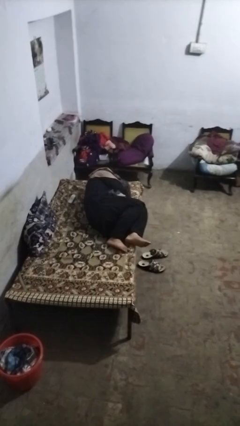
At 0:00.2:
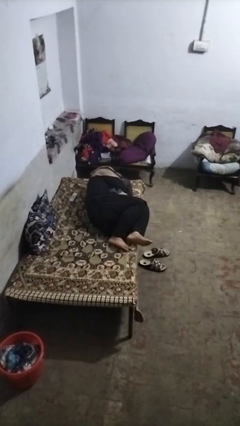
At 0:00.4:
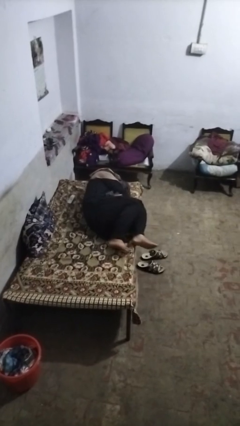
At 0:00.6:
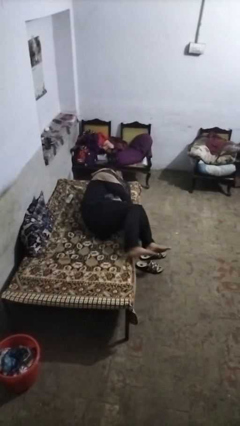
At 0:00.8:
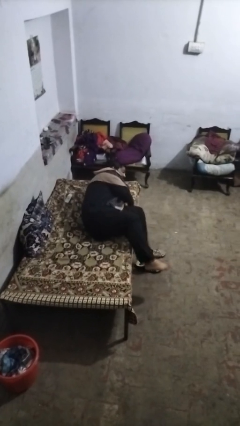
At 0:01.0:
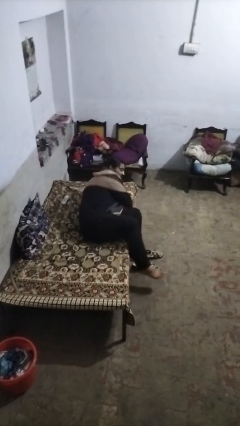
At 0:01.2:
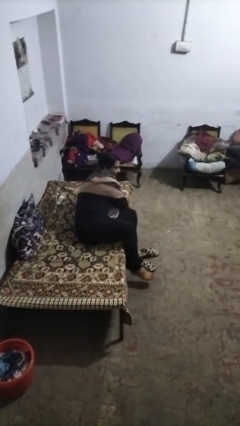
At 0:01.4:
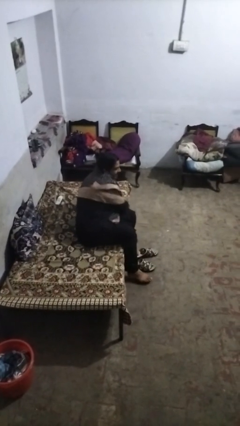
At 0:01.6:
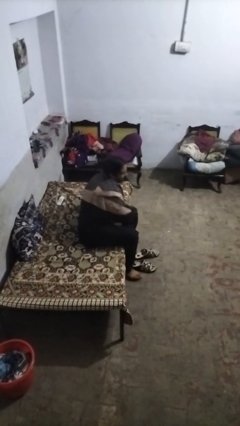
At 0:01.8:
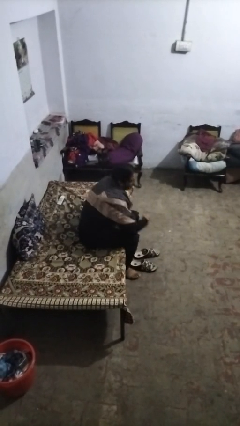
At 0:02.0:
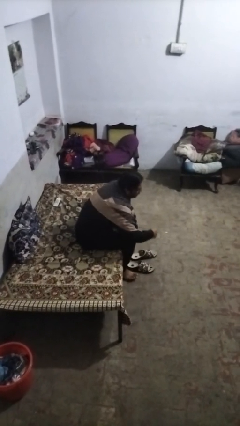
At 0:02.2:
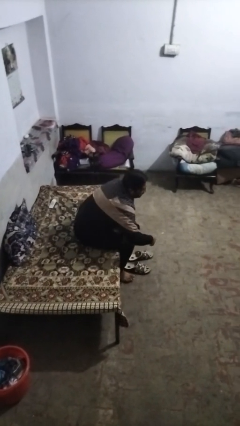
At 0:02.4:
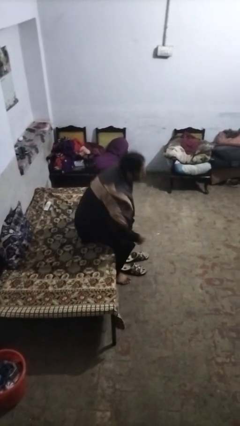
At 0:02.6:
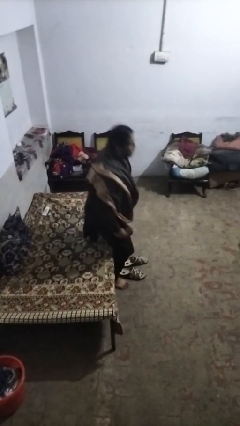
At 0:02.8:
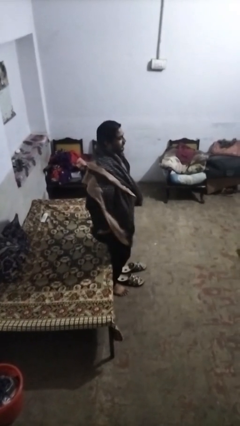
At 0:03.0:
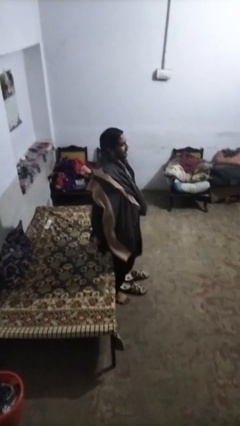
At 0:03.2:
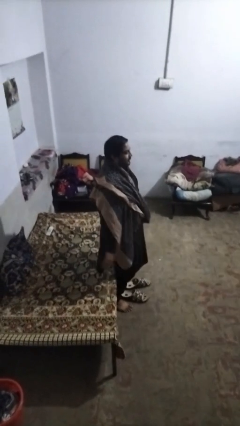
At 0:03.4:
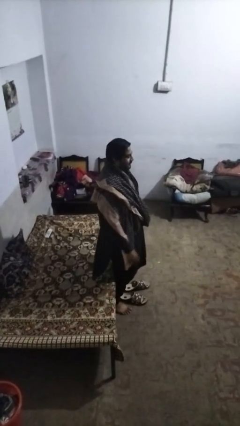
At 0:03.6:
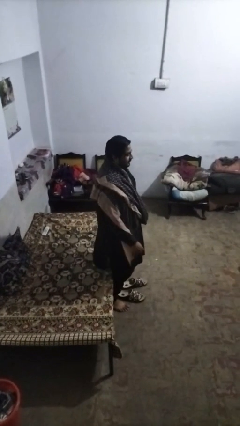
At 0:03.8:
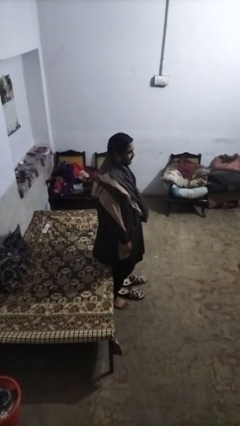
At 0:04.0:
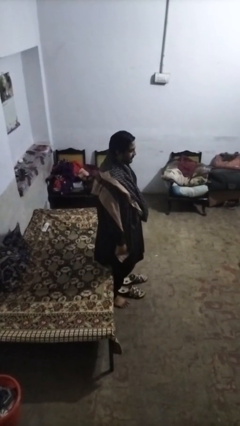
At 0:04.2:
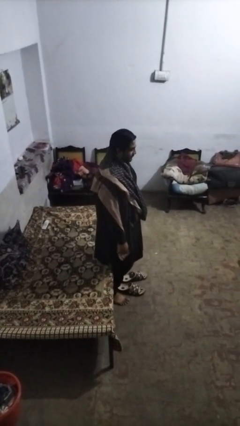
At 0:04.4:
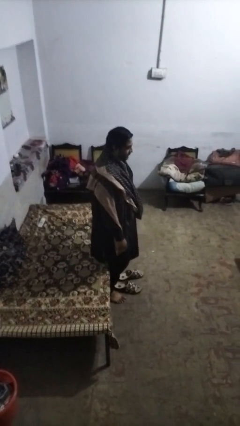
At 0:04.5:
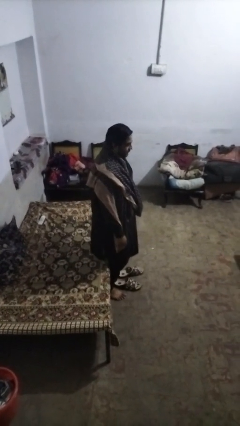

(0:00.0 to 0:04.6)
person stands up

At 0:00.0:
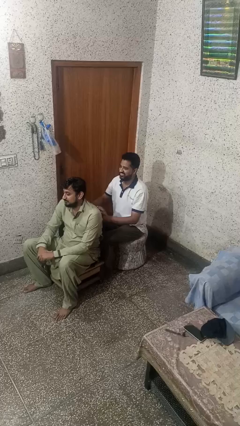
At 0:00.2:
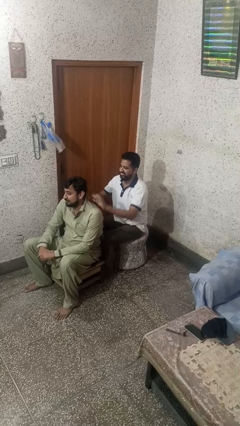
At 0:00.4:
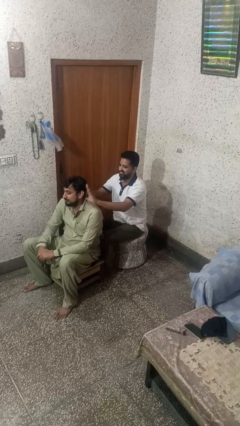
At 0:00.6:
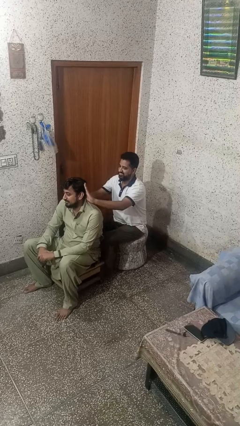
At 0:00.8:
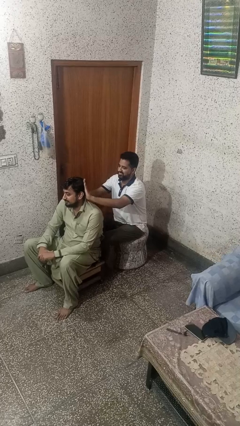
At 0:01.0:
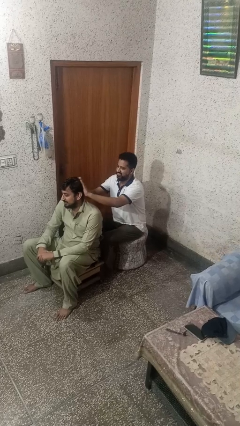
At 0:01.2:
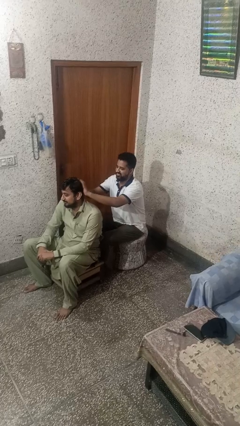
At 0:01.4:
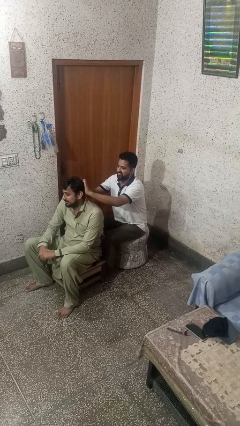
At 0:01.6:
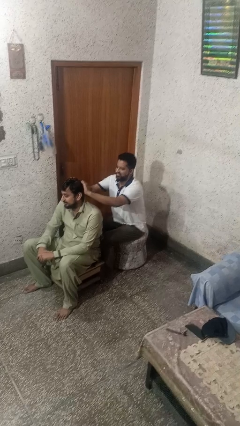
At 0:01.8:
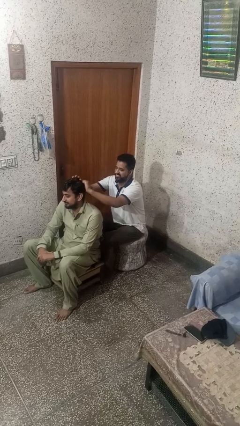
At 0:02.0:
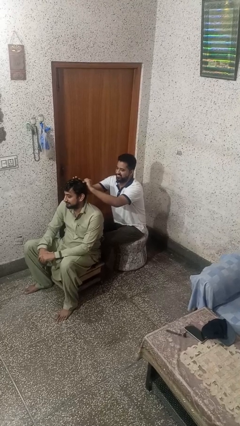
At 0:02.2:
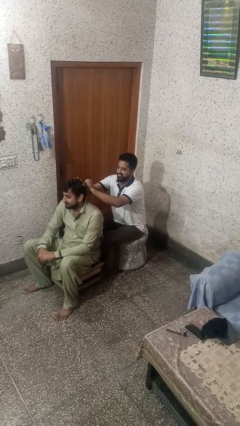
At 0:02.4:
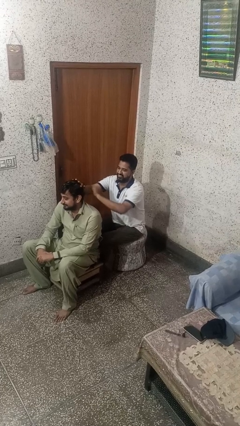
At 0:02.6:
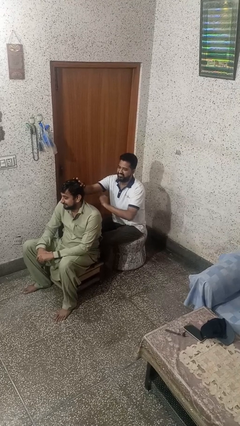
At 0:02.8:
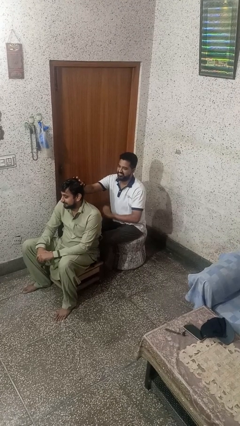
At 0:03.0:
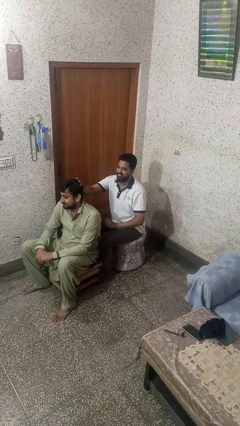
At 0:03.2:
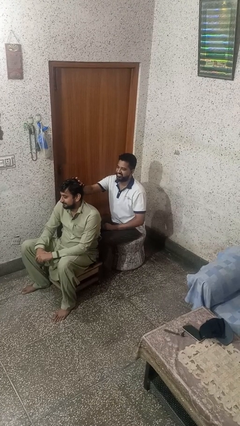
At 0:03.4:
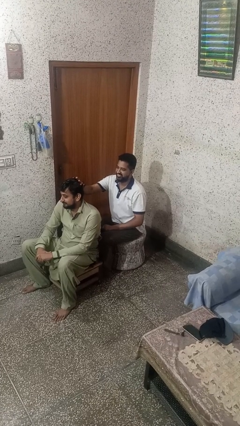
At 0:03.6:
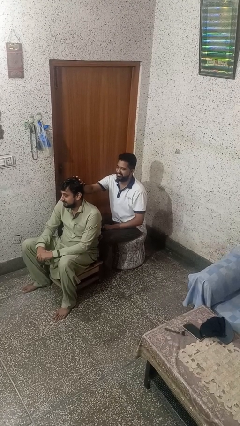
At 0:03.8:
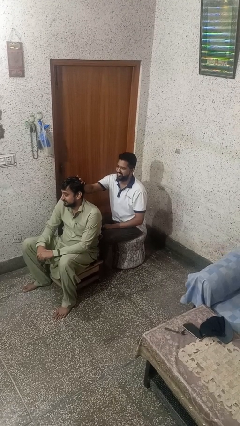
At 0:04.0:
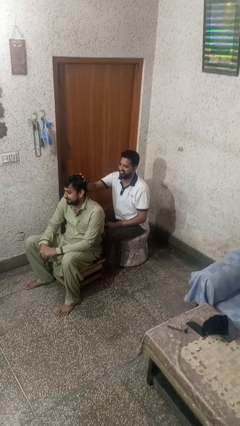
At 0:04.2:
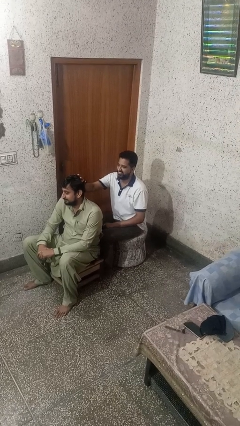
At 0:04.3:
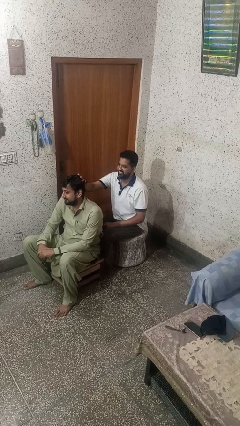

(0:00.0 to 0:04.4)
person braids hair of person

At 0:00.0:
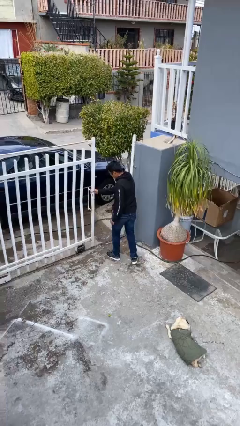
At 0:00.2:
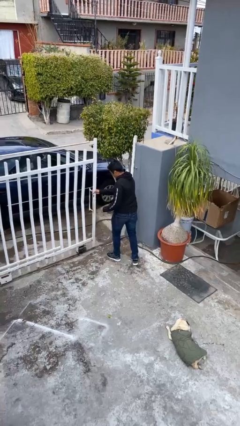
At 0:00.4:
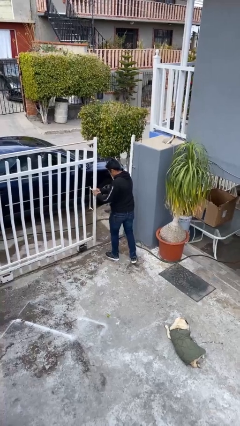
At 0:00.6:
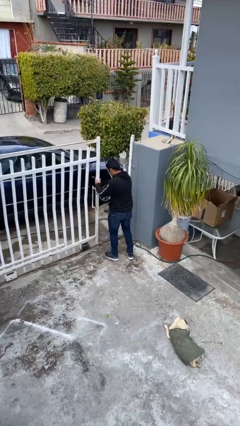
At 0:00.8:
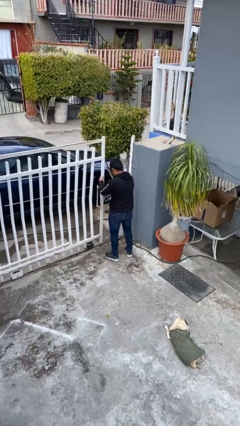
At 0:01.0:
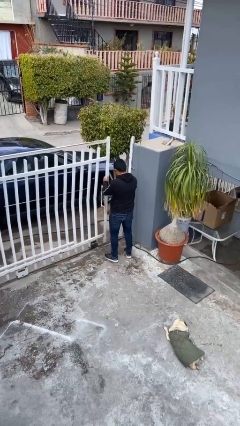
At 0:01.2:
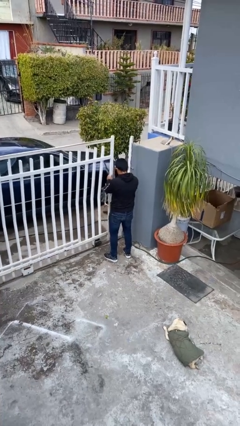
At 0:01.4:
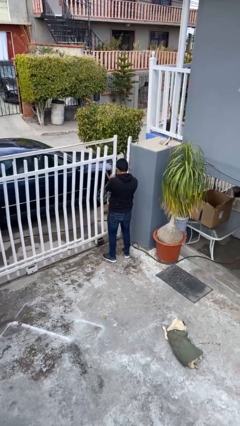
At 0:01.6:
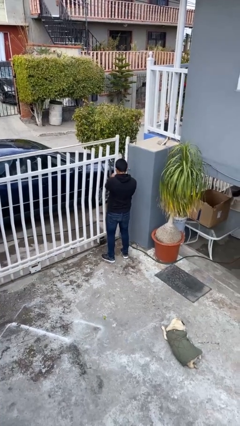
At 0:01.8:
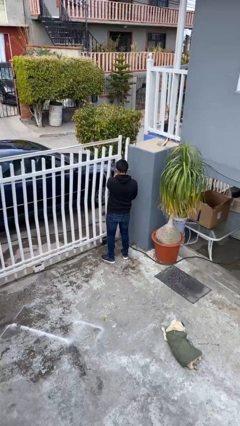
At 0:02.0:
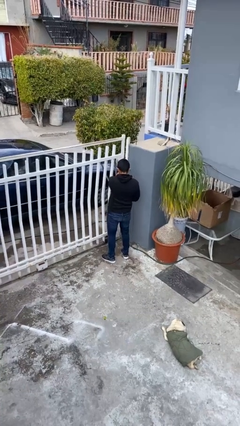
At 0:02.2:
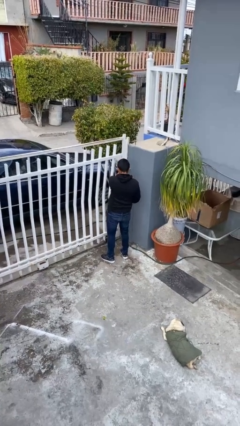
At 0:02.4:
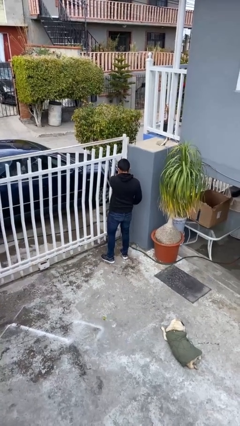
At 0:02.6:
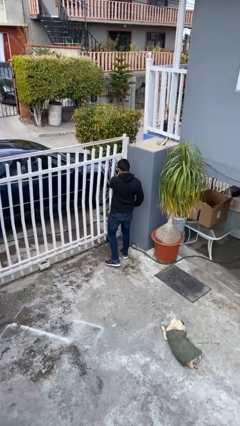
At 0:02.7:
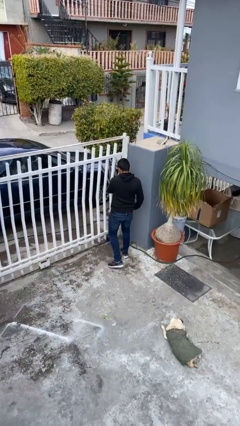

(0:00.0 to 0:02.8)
person closes facility door

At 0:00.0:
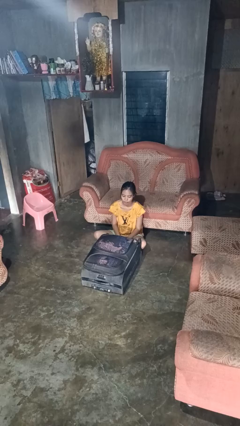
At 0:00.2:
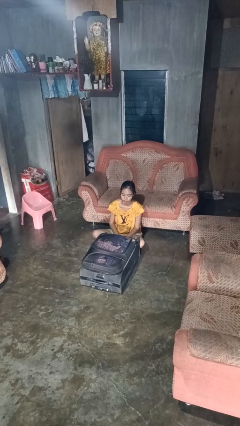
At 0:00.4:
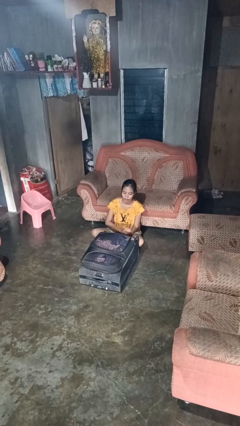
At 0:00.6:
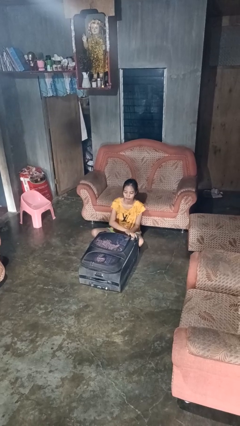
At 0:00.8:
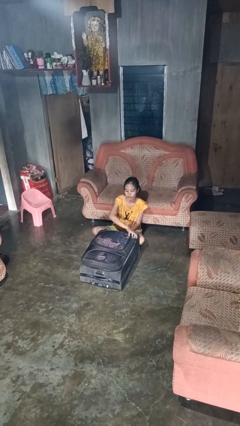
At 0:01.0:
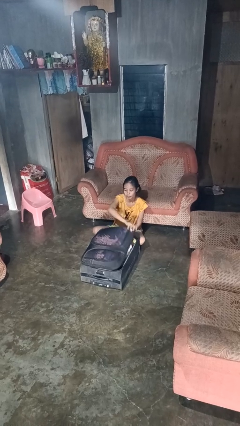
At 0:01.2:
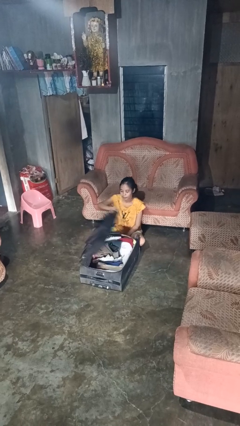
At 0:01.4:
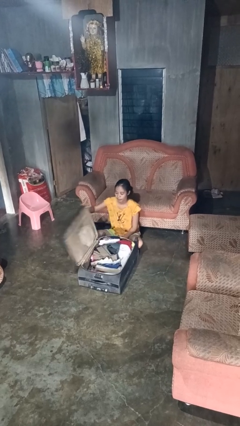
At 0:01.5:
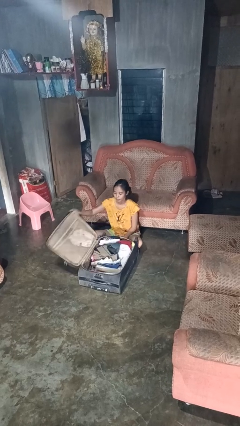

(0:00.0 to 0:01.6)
person opens suitcase

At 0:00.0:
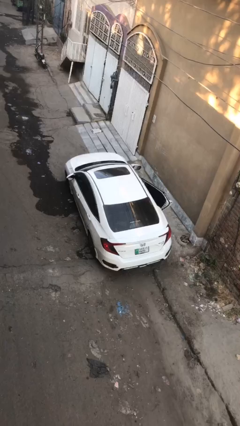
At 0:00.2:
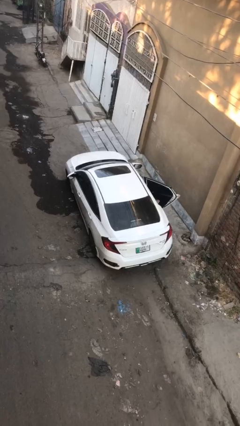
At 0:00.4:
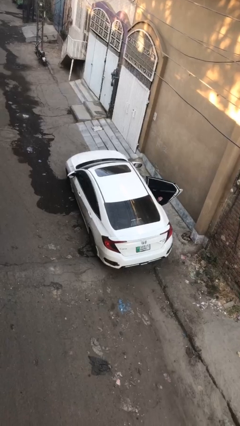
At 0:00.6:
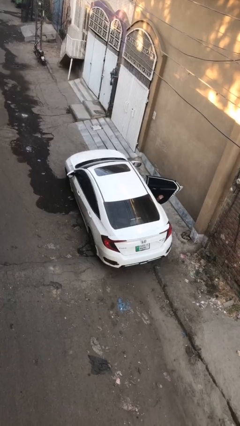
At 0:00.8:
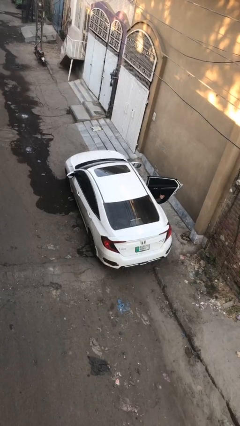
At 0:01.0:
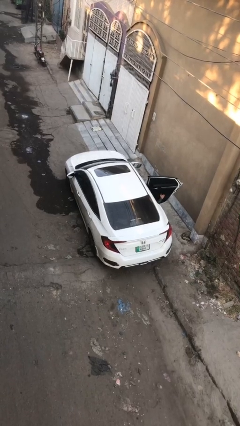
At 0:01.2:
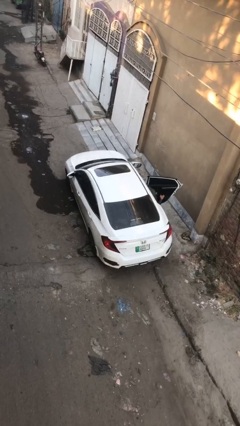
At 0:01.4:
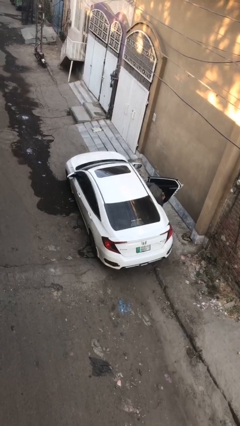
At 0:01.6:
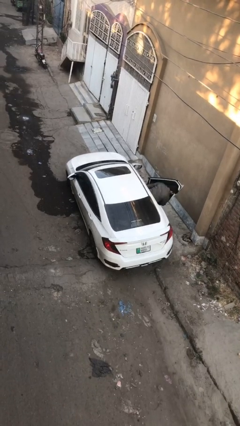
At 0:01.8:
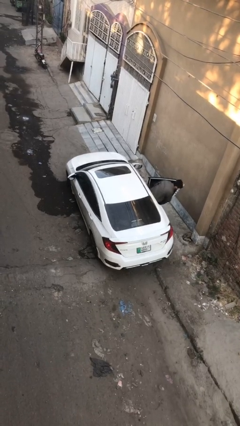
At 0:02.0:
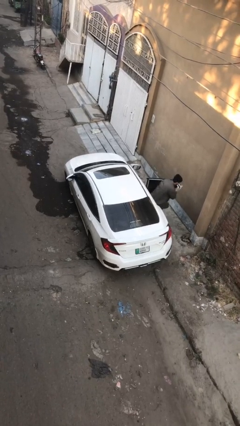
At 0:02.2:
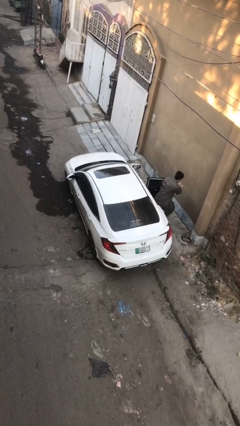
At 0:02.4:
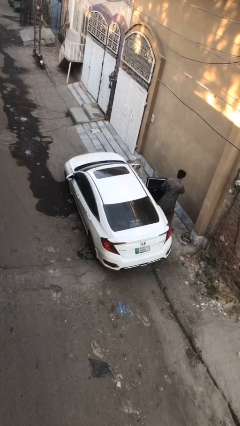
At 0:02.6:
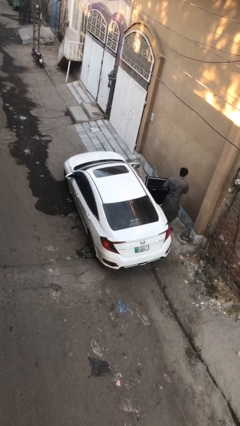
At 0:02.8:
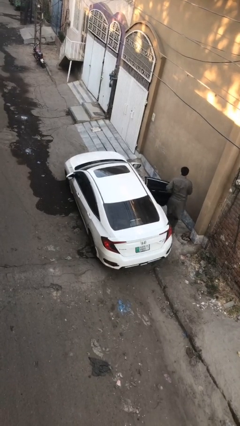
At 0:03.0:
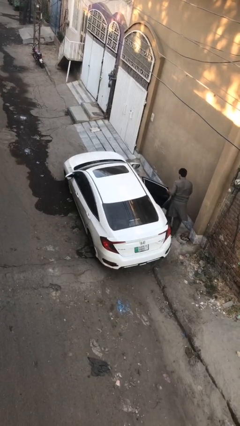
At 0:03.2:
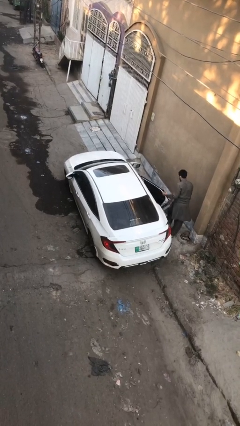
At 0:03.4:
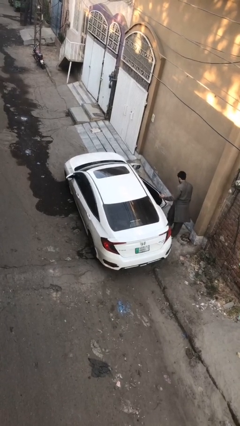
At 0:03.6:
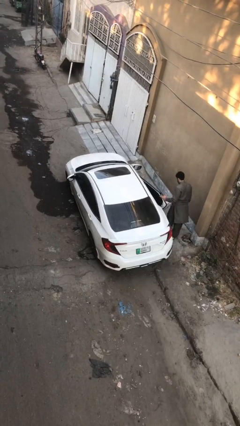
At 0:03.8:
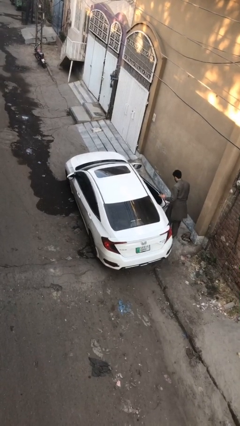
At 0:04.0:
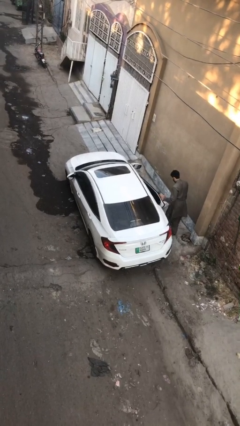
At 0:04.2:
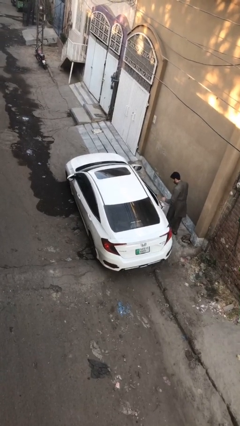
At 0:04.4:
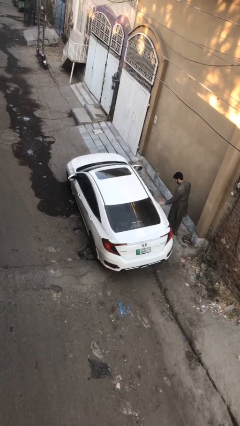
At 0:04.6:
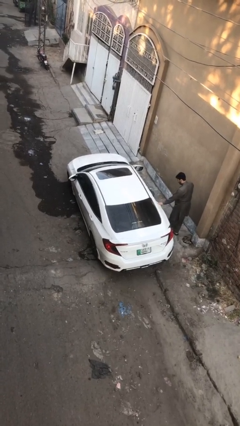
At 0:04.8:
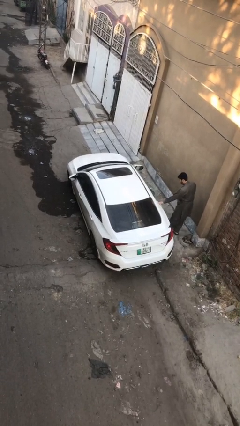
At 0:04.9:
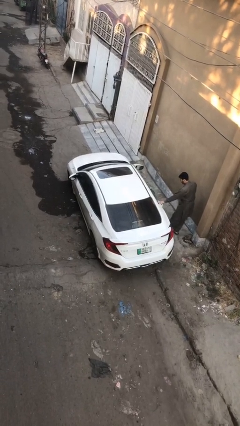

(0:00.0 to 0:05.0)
car drops off person
